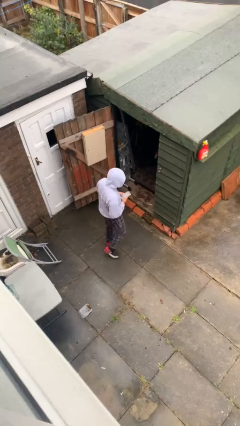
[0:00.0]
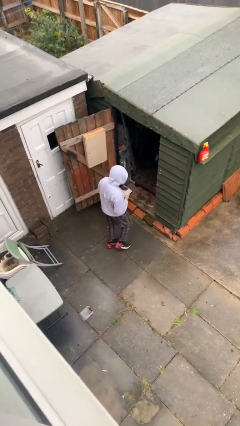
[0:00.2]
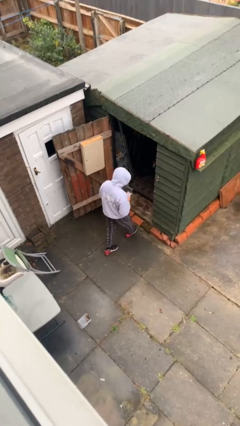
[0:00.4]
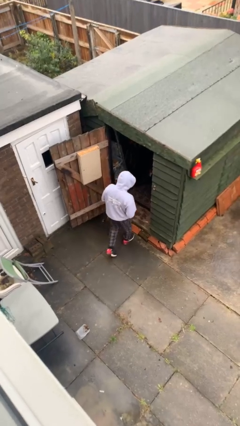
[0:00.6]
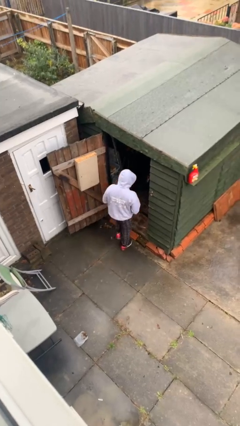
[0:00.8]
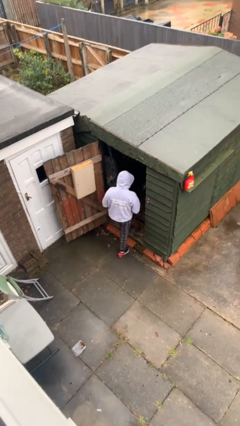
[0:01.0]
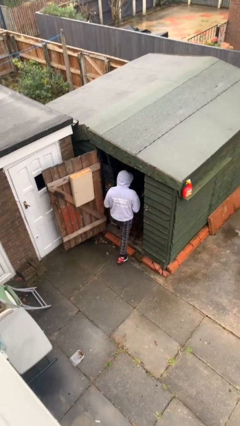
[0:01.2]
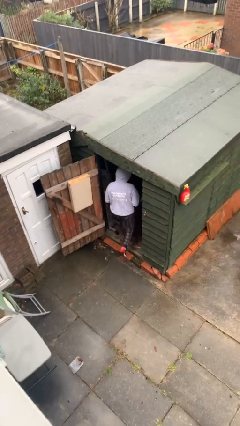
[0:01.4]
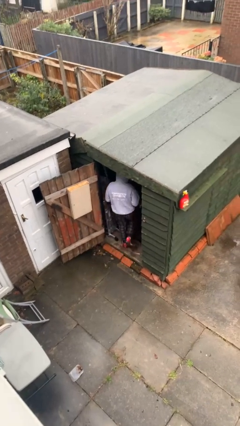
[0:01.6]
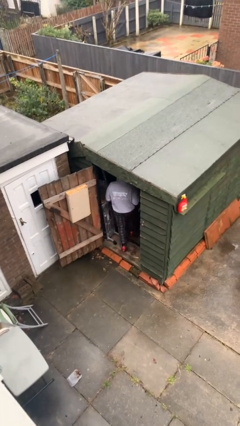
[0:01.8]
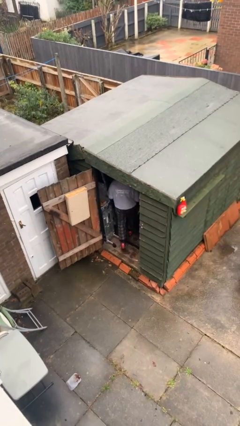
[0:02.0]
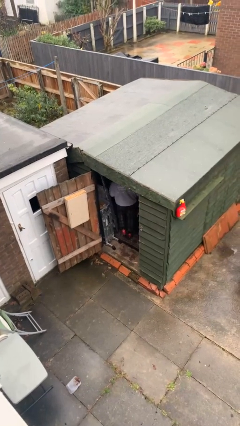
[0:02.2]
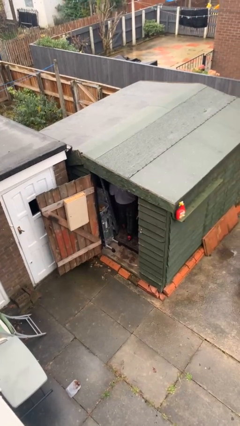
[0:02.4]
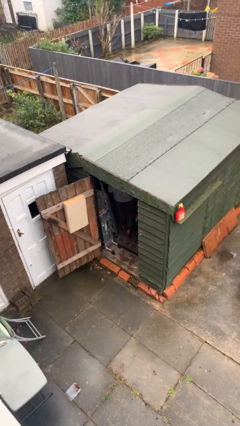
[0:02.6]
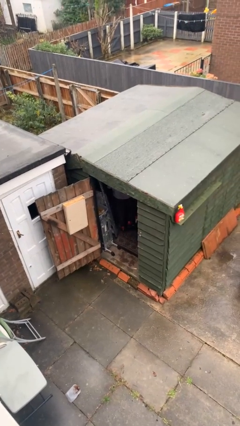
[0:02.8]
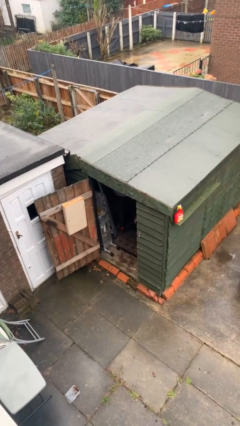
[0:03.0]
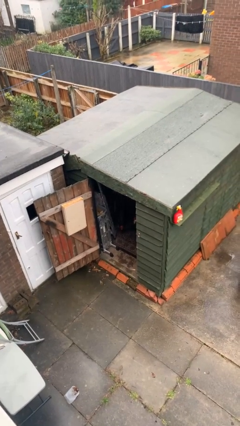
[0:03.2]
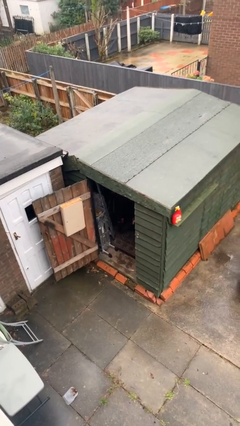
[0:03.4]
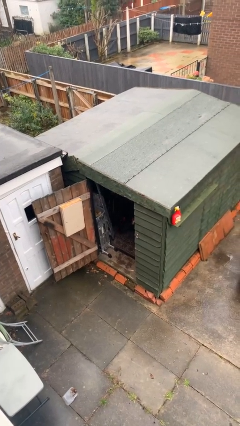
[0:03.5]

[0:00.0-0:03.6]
person exits scene through structure

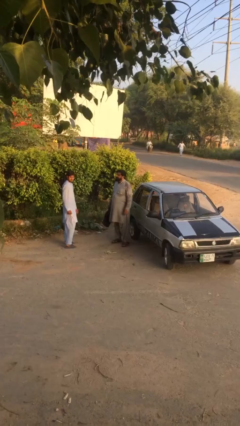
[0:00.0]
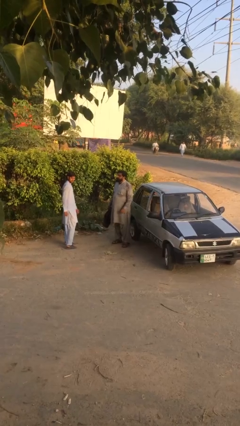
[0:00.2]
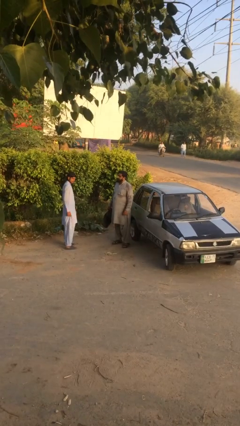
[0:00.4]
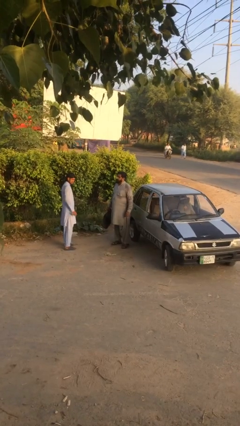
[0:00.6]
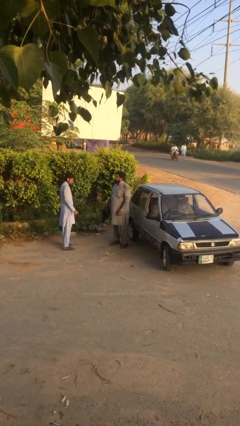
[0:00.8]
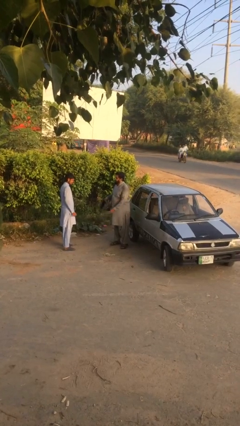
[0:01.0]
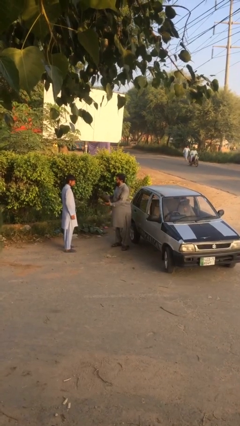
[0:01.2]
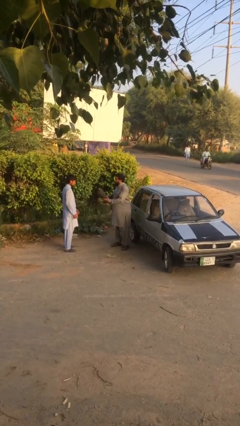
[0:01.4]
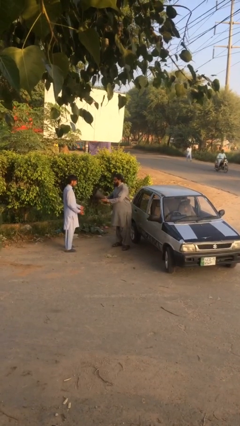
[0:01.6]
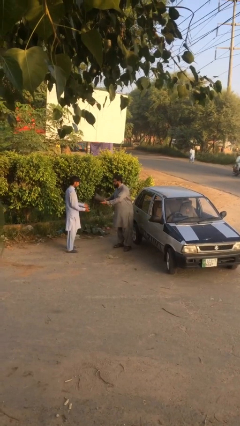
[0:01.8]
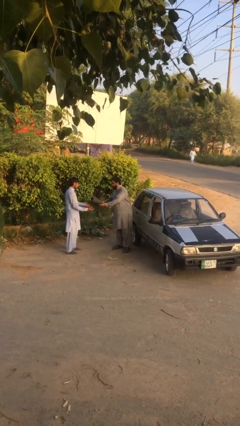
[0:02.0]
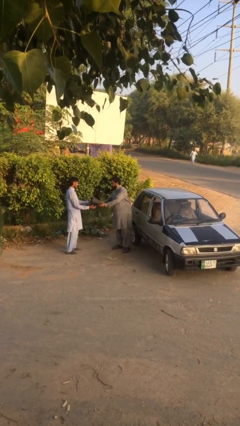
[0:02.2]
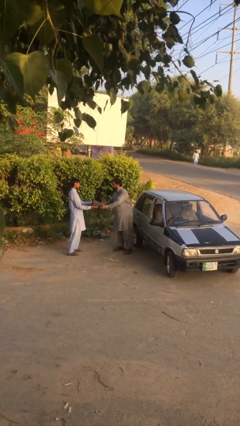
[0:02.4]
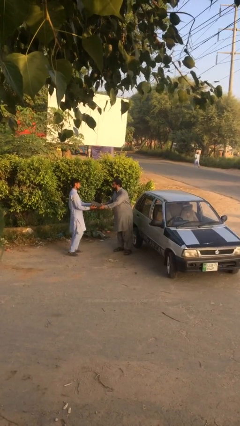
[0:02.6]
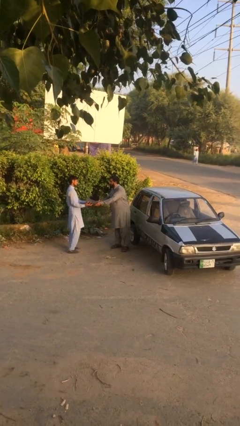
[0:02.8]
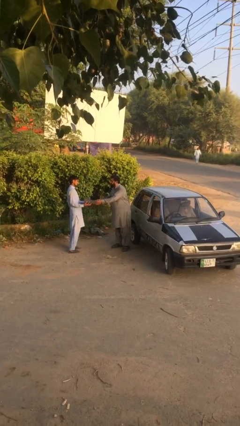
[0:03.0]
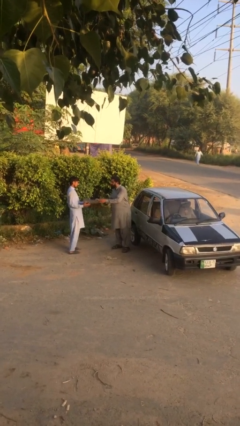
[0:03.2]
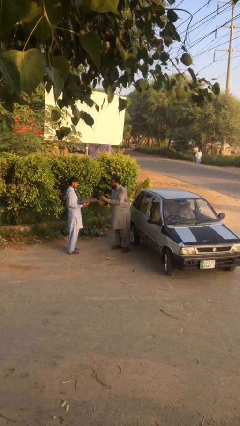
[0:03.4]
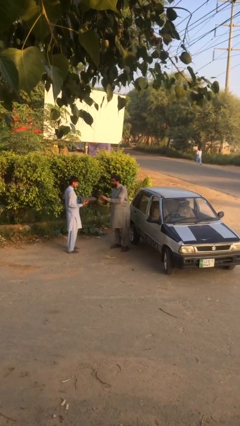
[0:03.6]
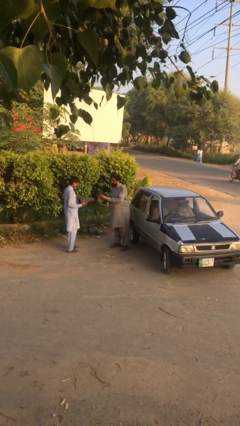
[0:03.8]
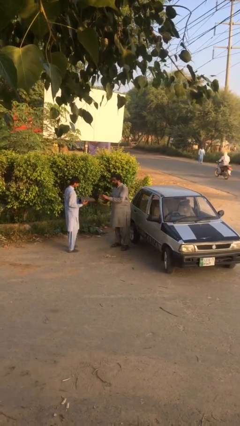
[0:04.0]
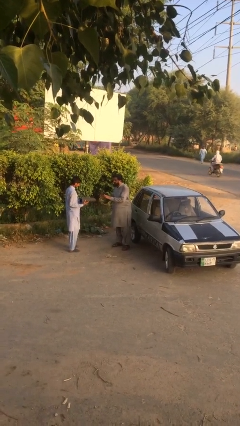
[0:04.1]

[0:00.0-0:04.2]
person transfers object to person

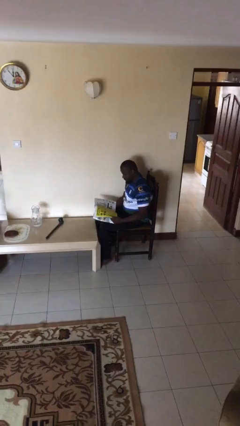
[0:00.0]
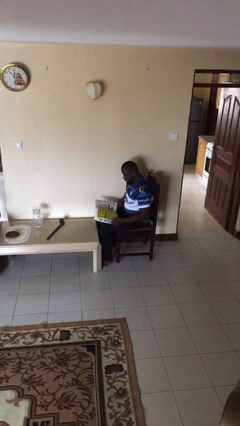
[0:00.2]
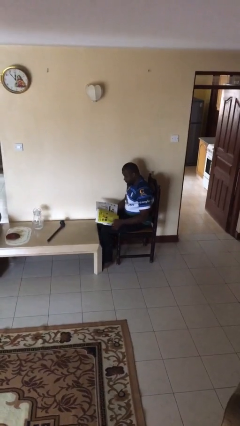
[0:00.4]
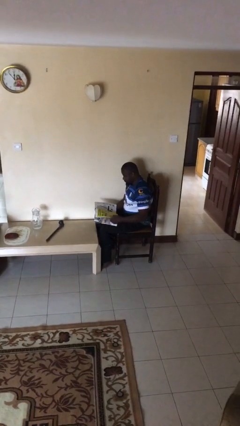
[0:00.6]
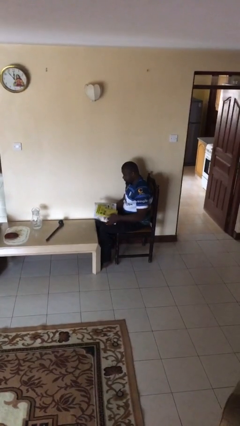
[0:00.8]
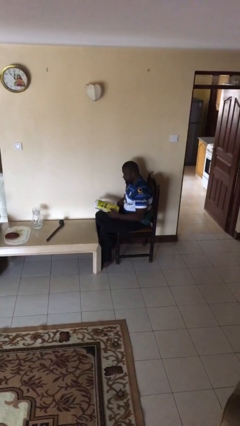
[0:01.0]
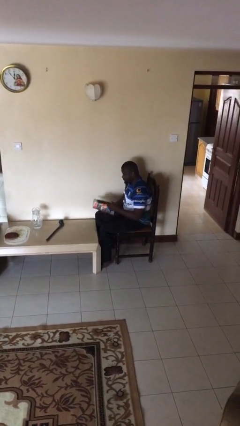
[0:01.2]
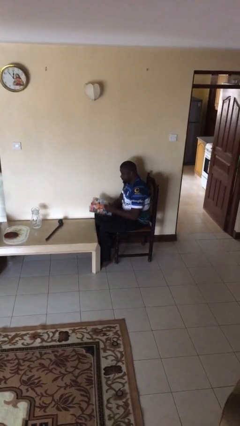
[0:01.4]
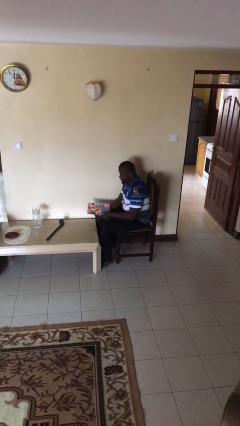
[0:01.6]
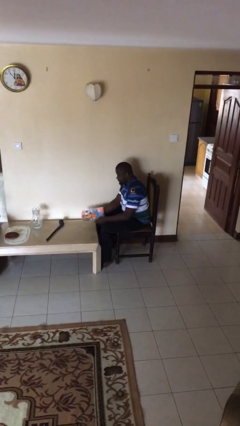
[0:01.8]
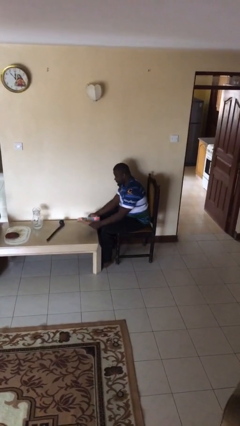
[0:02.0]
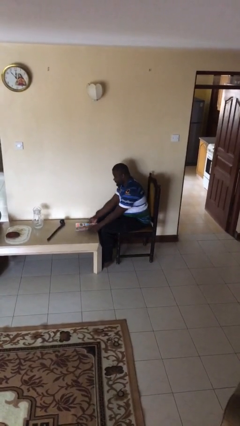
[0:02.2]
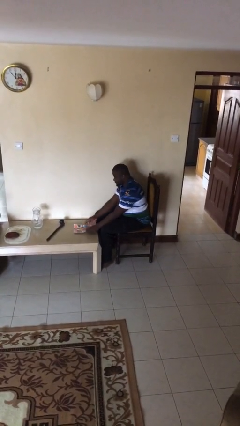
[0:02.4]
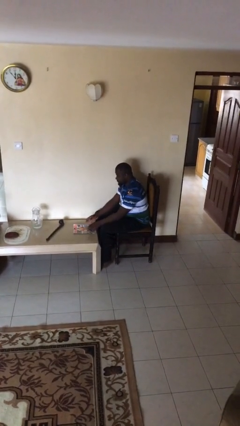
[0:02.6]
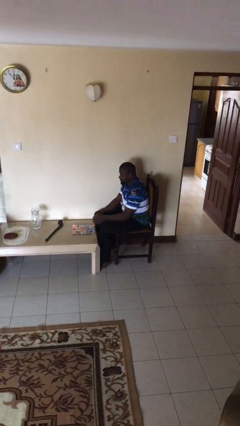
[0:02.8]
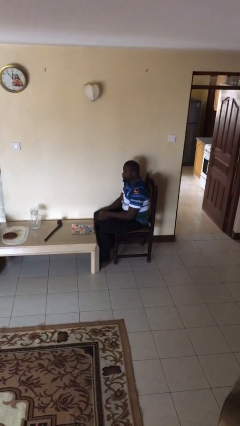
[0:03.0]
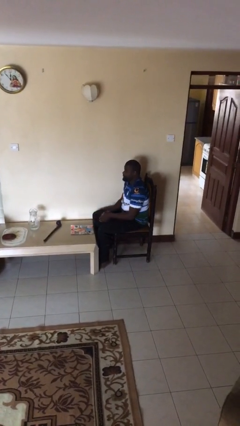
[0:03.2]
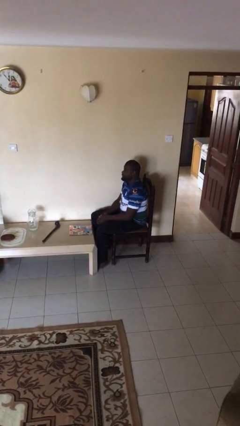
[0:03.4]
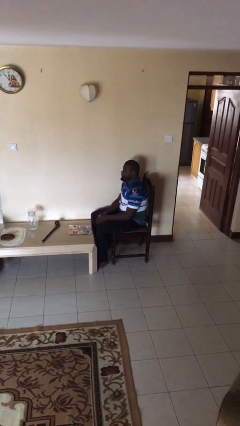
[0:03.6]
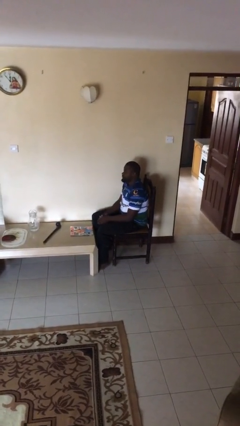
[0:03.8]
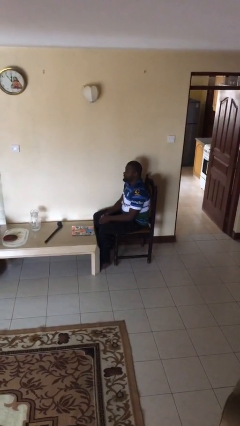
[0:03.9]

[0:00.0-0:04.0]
person puts down object on table

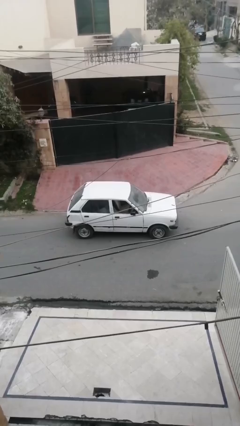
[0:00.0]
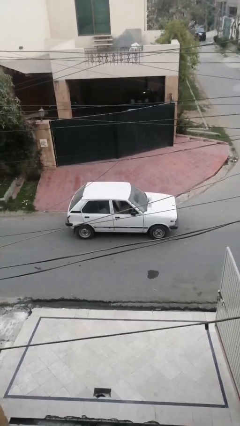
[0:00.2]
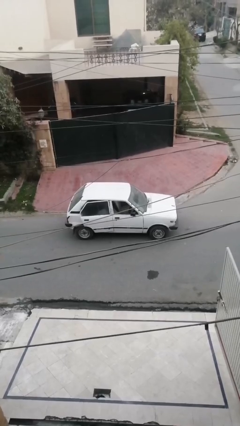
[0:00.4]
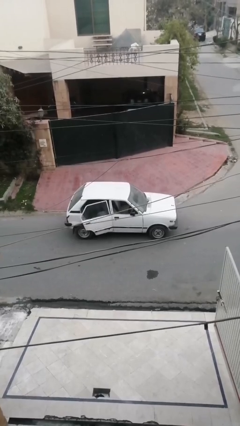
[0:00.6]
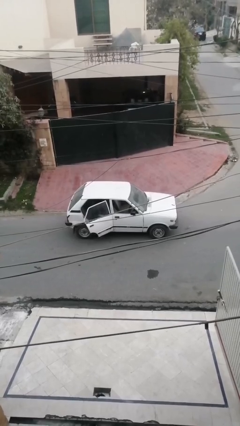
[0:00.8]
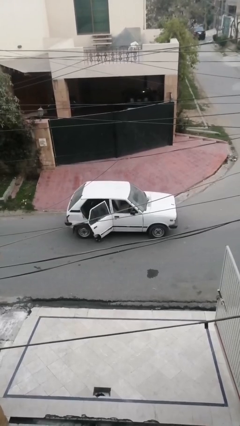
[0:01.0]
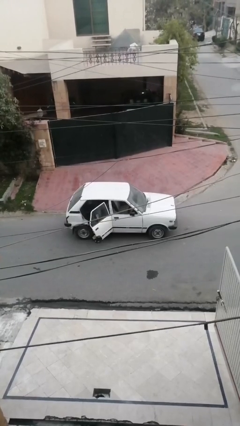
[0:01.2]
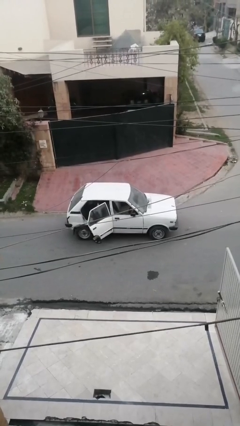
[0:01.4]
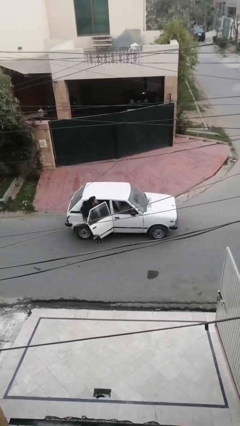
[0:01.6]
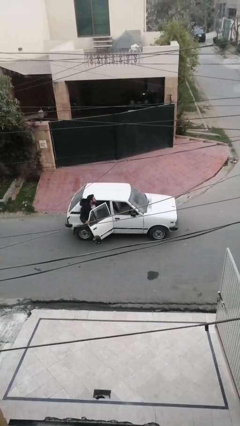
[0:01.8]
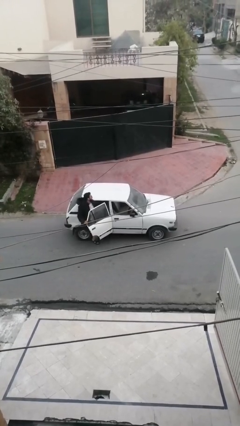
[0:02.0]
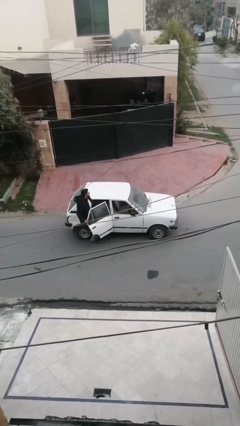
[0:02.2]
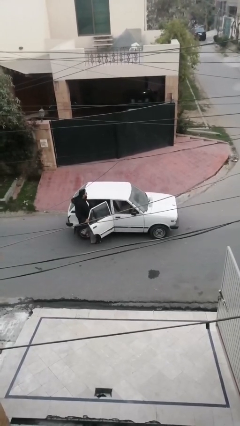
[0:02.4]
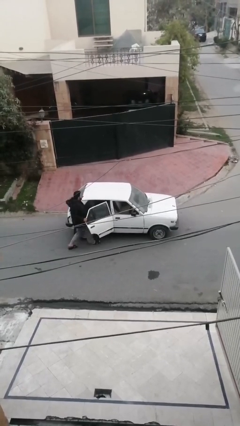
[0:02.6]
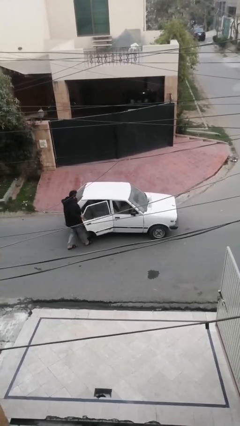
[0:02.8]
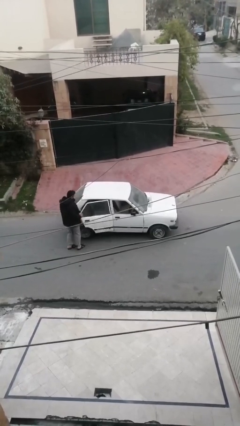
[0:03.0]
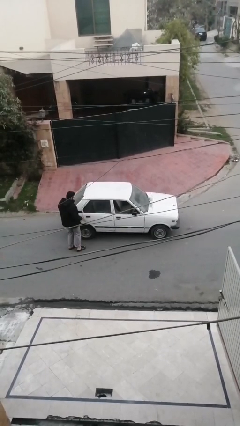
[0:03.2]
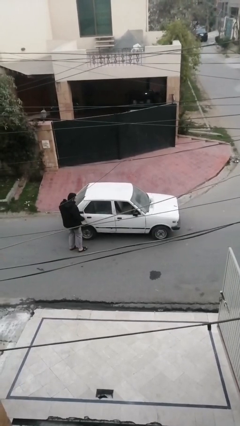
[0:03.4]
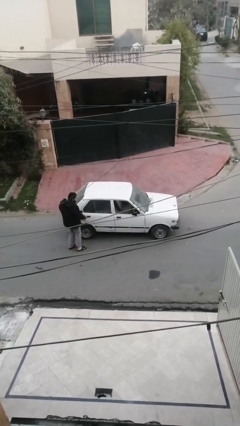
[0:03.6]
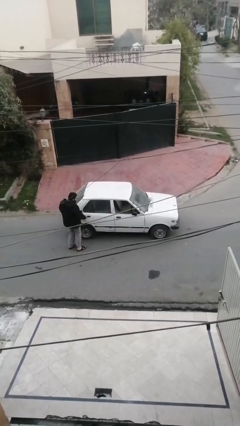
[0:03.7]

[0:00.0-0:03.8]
car drops off person

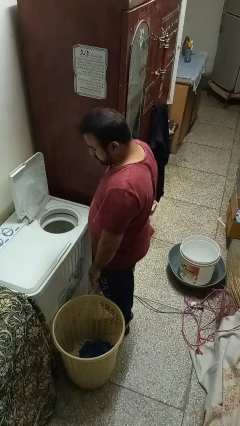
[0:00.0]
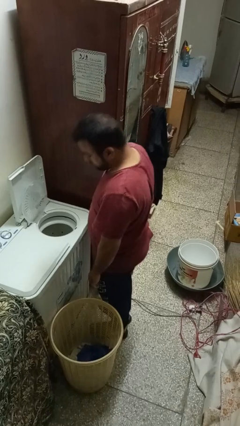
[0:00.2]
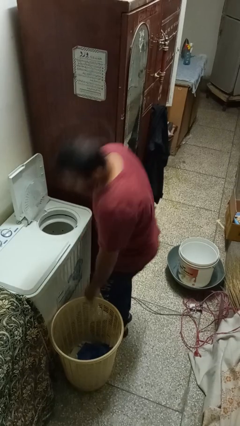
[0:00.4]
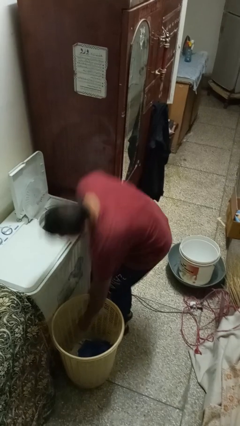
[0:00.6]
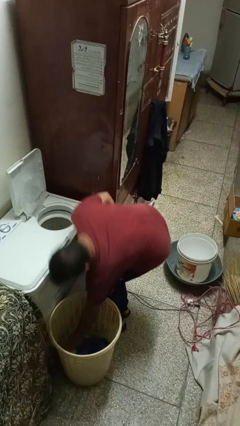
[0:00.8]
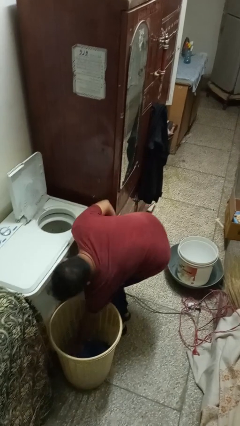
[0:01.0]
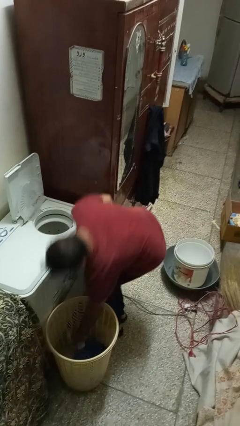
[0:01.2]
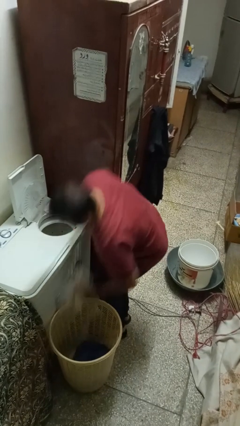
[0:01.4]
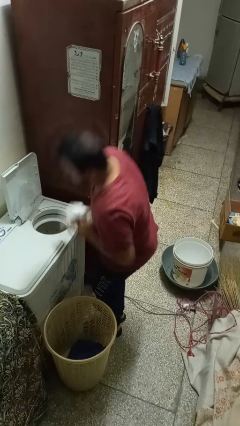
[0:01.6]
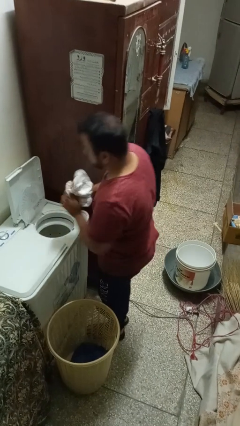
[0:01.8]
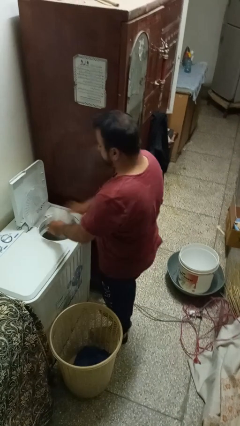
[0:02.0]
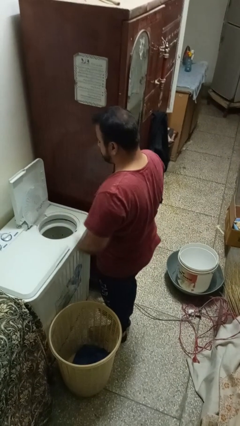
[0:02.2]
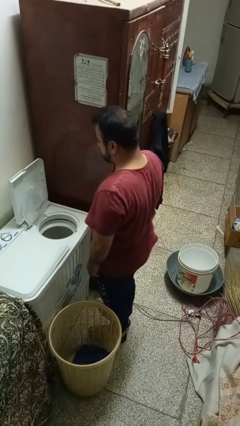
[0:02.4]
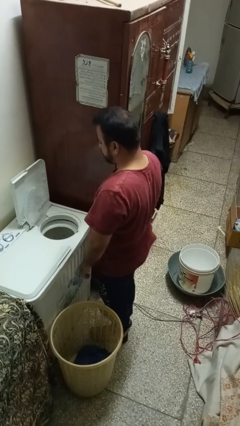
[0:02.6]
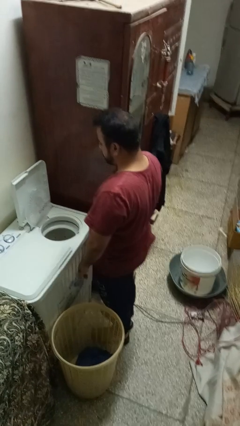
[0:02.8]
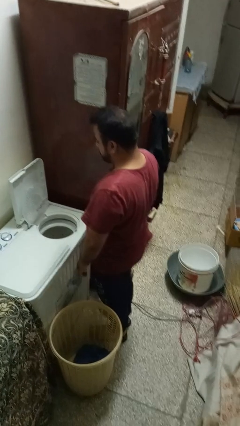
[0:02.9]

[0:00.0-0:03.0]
person loads dryer
